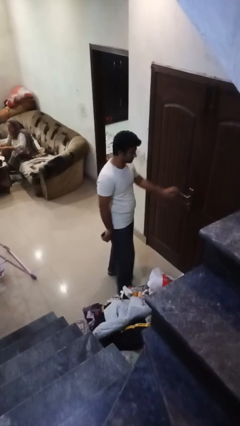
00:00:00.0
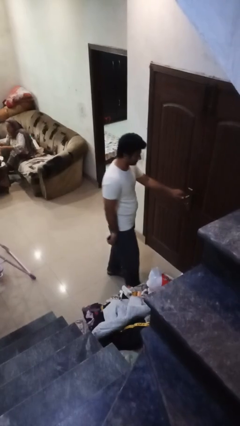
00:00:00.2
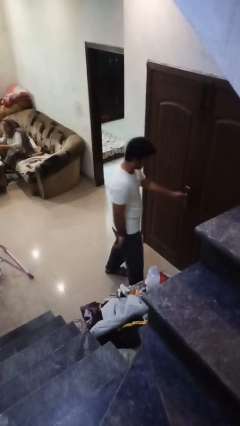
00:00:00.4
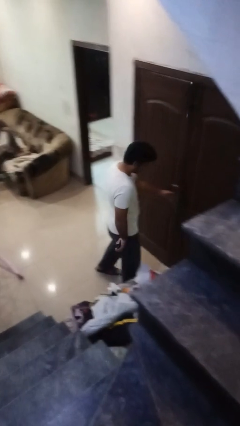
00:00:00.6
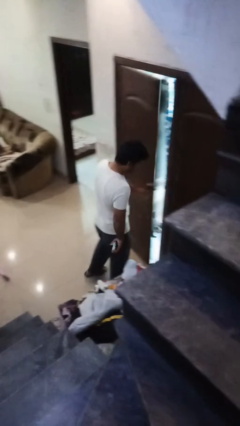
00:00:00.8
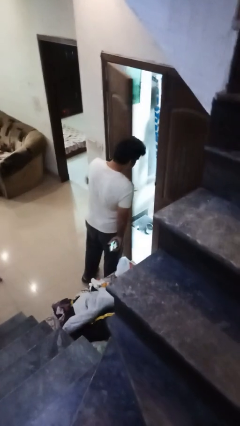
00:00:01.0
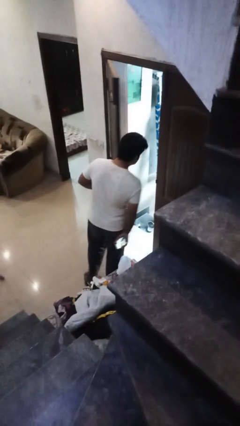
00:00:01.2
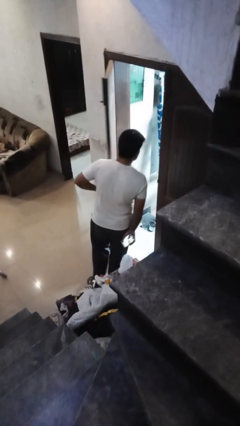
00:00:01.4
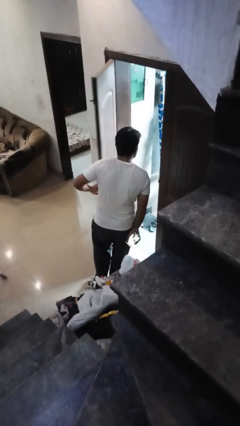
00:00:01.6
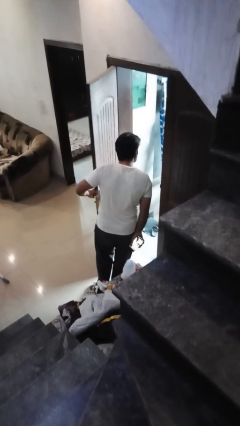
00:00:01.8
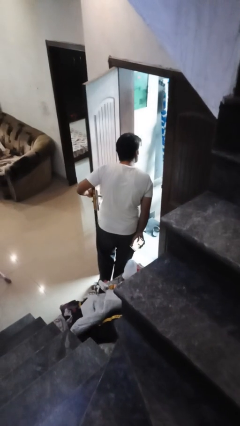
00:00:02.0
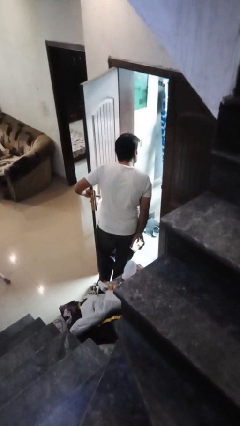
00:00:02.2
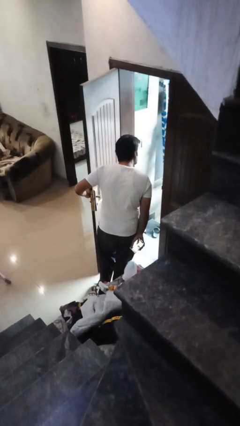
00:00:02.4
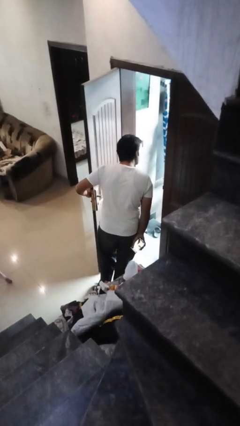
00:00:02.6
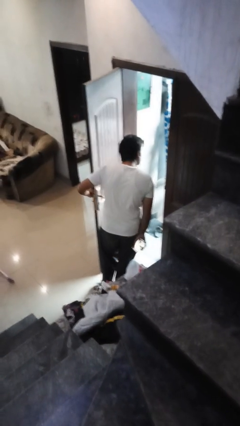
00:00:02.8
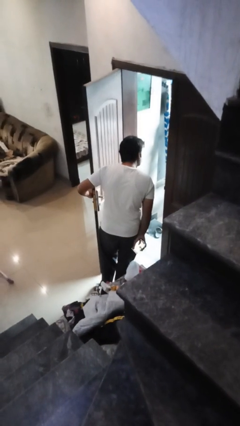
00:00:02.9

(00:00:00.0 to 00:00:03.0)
person opens facility door

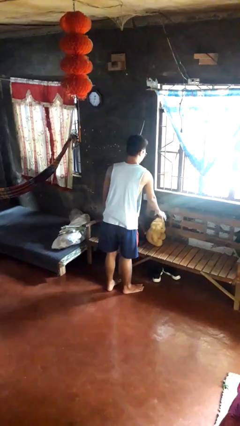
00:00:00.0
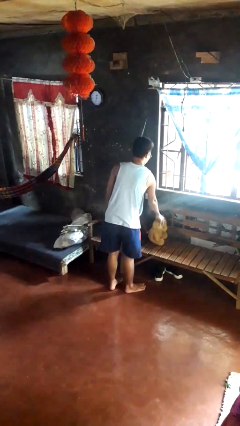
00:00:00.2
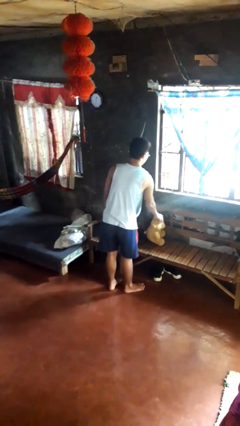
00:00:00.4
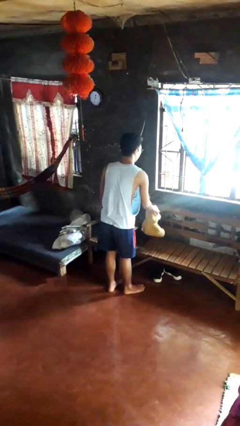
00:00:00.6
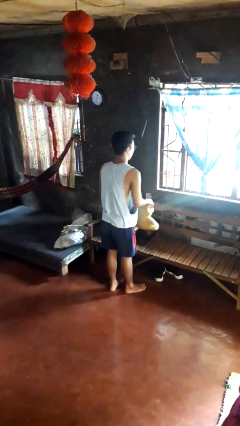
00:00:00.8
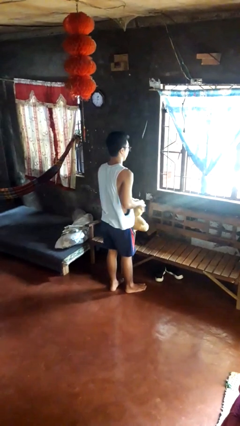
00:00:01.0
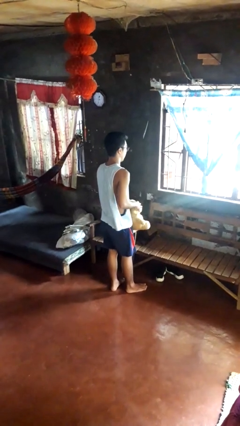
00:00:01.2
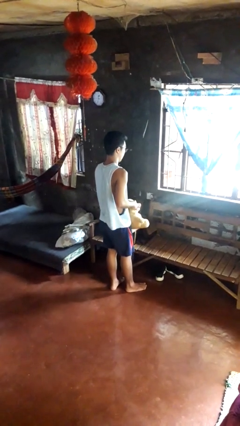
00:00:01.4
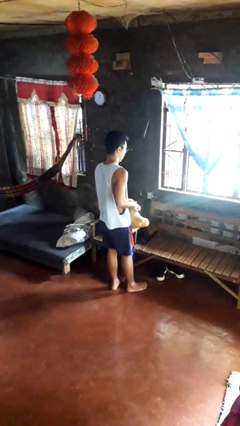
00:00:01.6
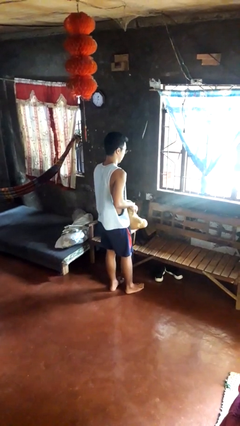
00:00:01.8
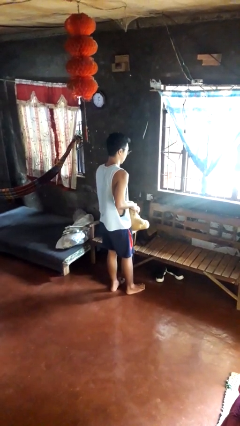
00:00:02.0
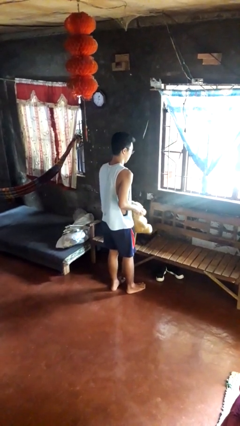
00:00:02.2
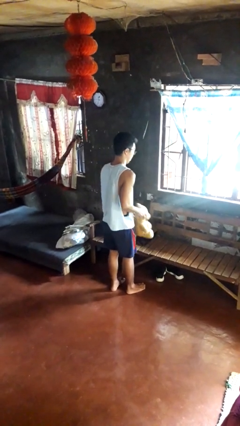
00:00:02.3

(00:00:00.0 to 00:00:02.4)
person picks up object from couch

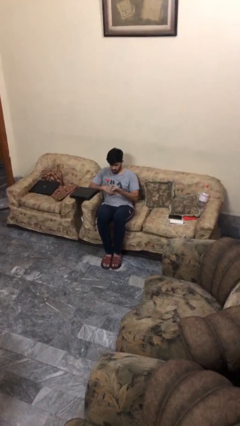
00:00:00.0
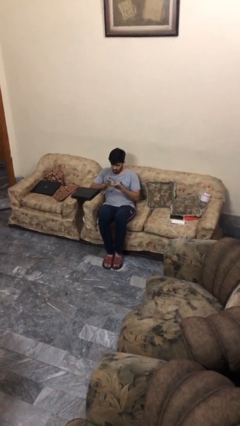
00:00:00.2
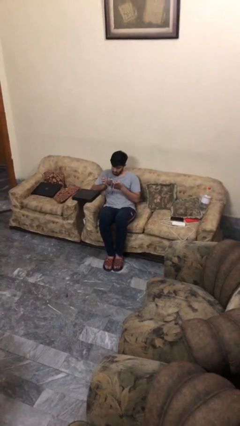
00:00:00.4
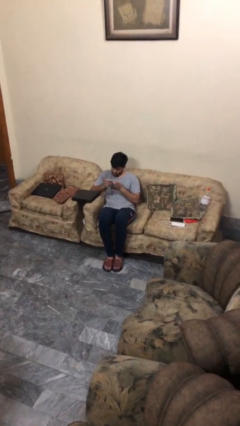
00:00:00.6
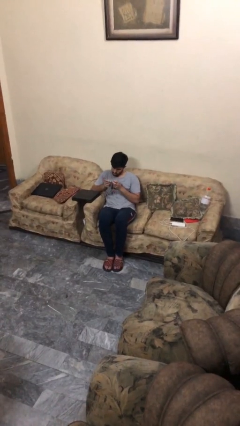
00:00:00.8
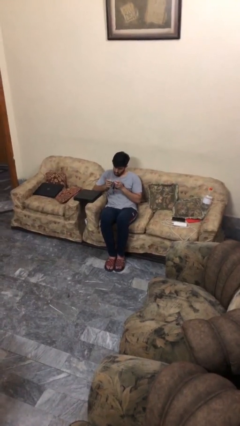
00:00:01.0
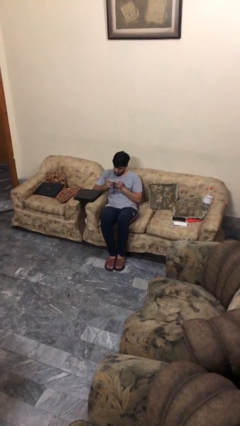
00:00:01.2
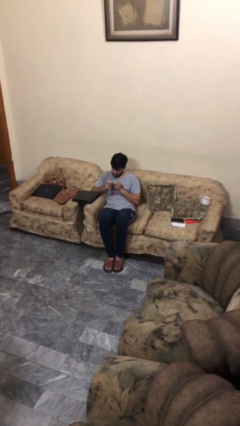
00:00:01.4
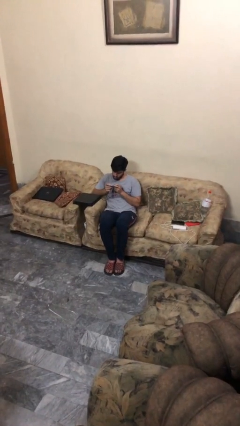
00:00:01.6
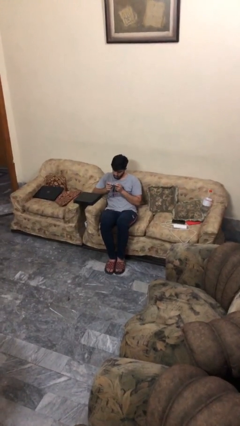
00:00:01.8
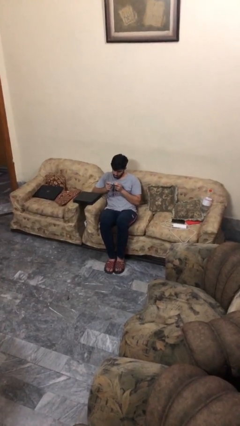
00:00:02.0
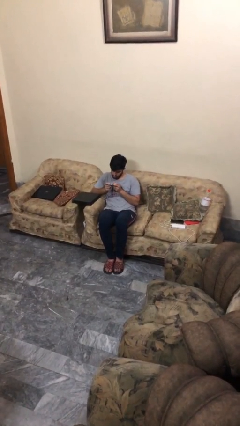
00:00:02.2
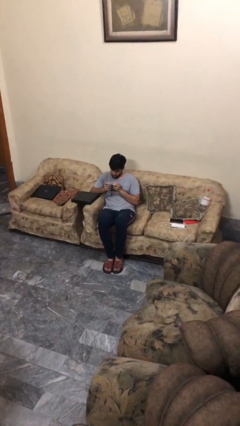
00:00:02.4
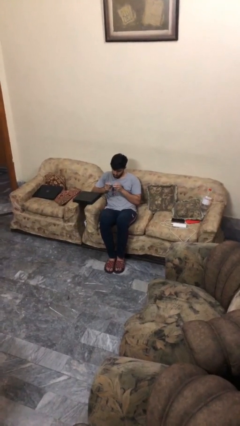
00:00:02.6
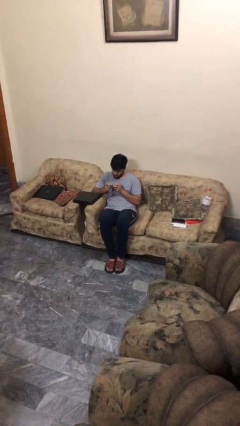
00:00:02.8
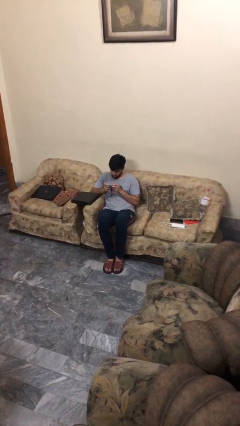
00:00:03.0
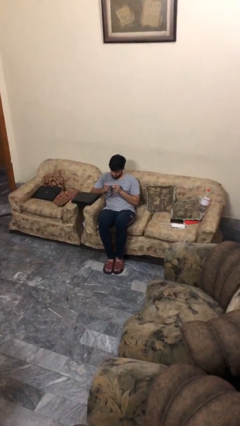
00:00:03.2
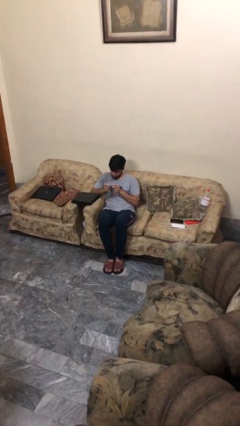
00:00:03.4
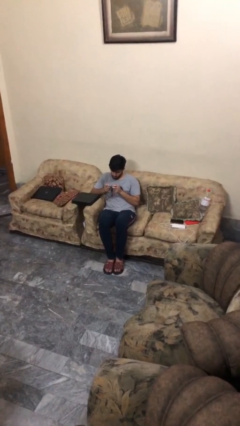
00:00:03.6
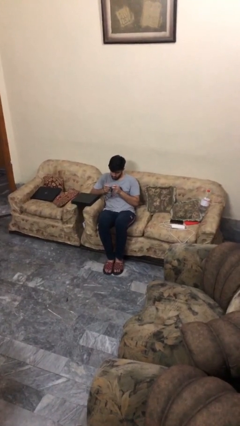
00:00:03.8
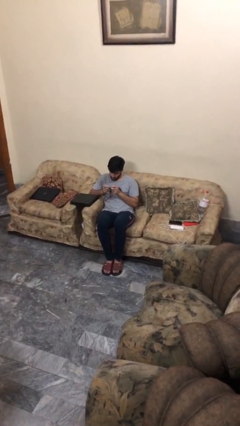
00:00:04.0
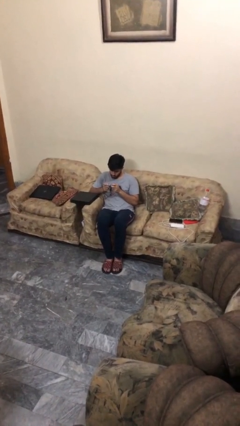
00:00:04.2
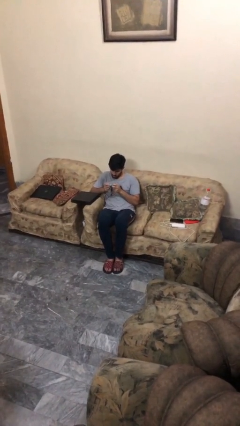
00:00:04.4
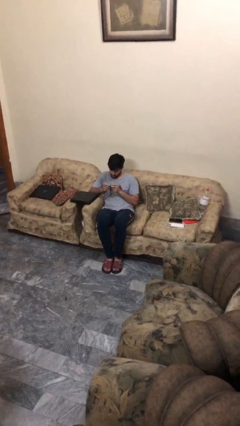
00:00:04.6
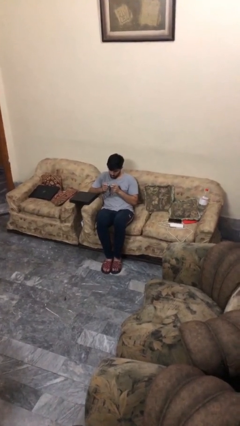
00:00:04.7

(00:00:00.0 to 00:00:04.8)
person interacts with handheld game

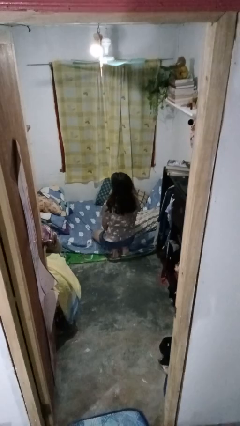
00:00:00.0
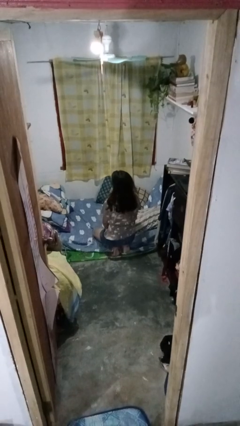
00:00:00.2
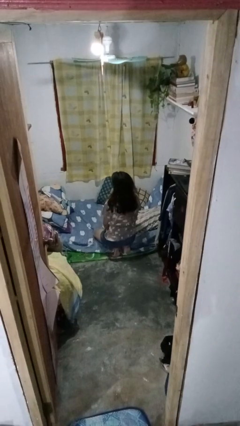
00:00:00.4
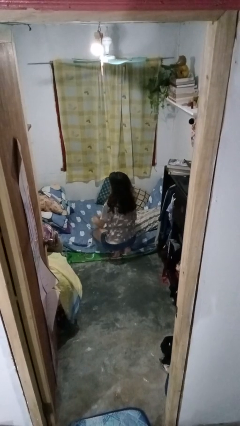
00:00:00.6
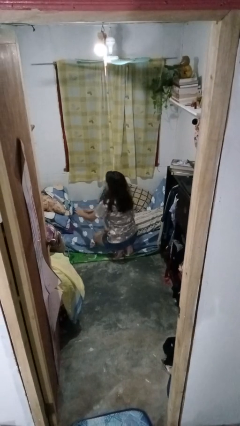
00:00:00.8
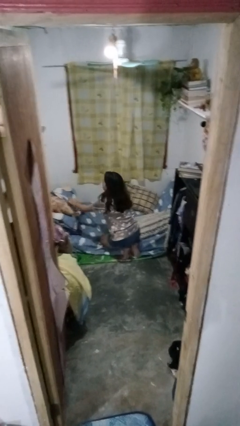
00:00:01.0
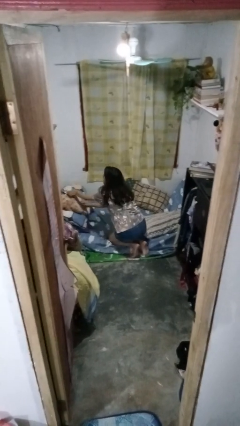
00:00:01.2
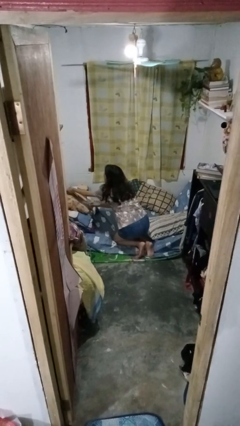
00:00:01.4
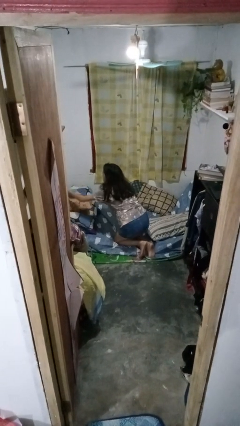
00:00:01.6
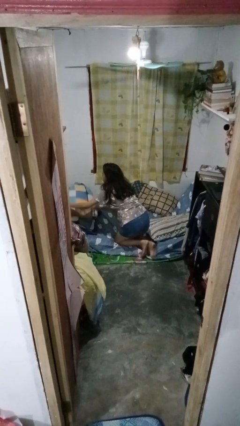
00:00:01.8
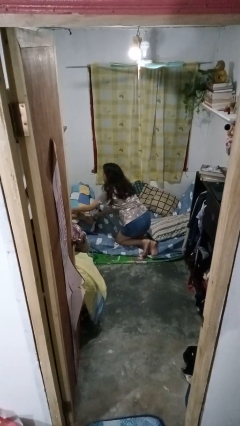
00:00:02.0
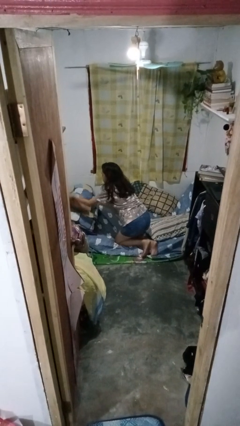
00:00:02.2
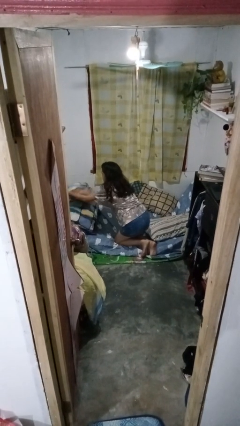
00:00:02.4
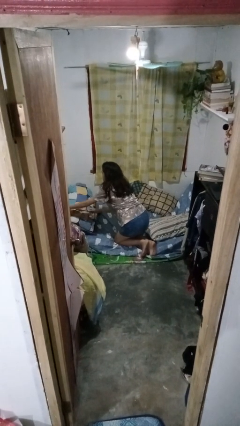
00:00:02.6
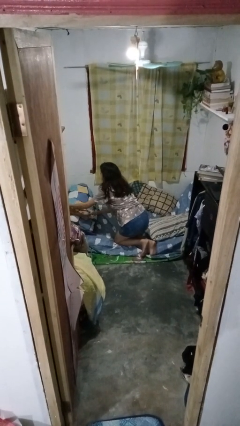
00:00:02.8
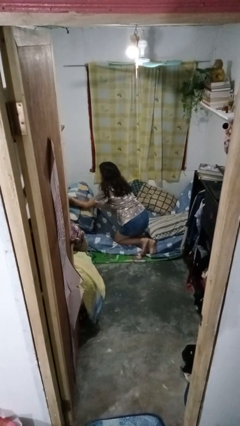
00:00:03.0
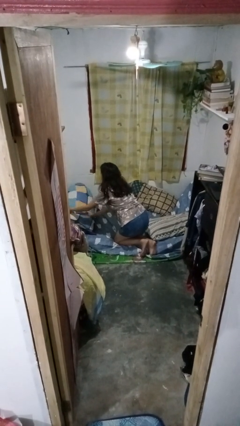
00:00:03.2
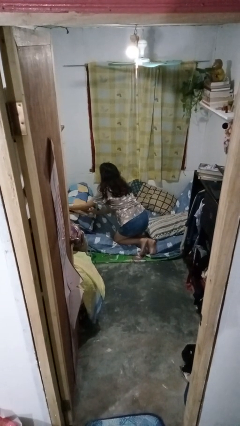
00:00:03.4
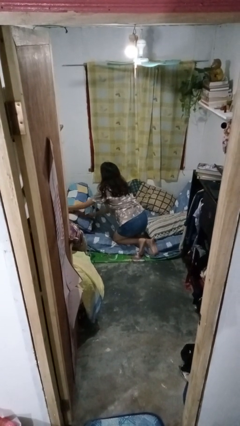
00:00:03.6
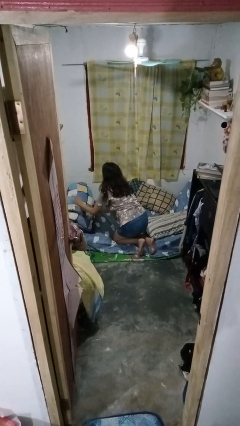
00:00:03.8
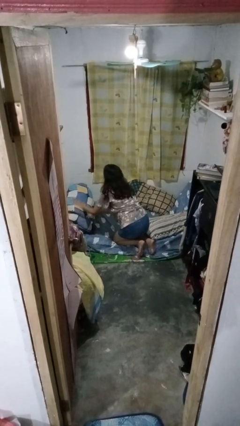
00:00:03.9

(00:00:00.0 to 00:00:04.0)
person makes bed

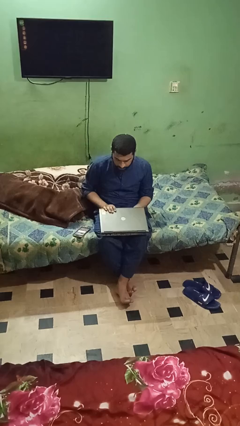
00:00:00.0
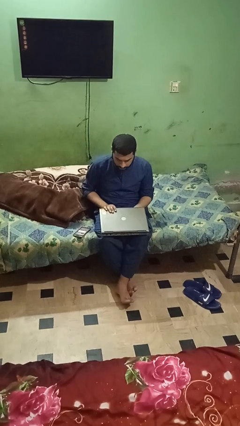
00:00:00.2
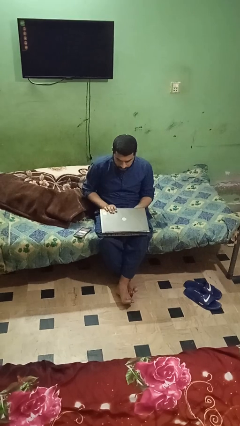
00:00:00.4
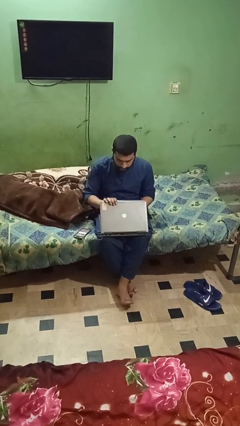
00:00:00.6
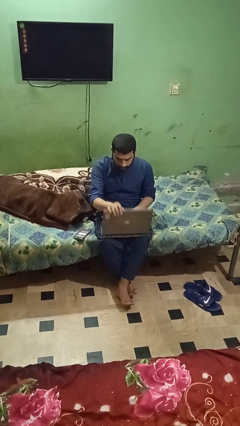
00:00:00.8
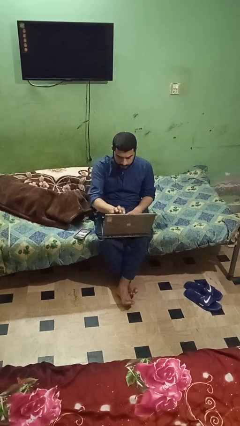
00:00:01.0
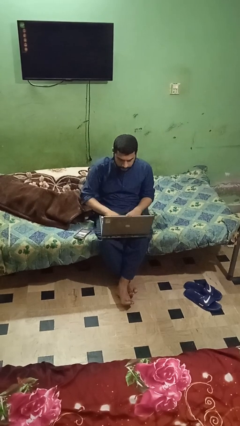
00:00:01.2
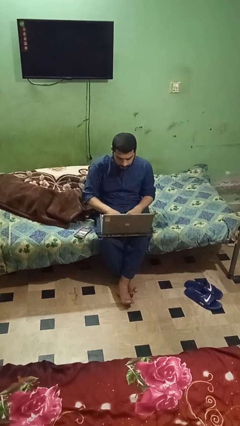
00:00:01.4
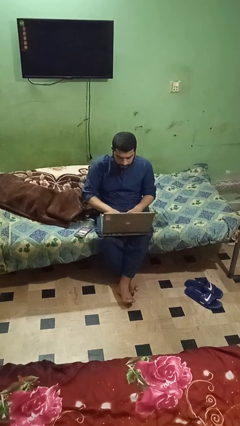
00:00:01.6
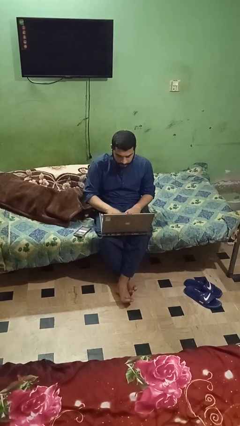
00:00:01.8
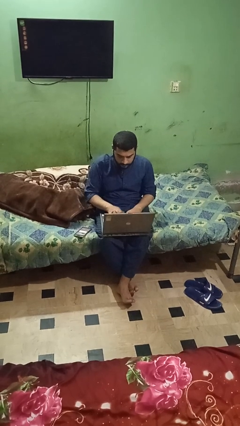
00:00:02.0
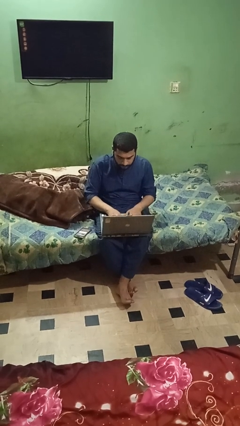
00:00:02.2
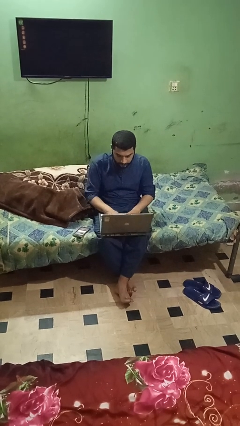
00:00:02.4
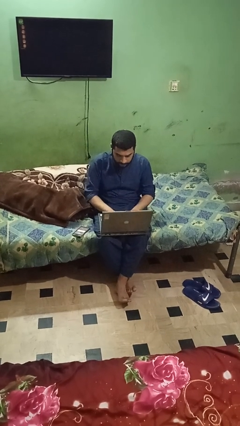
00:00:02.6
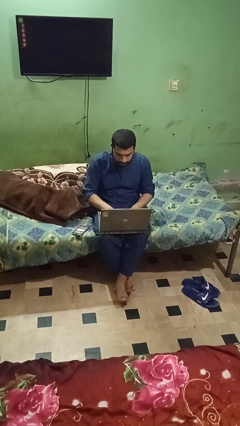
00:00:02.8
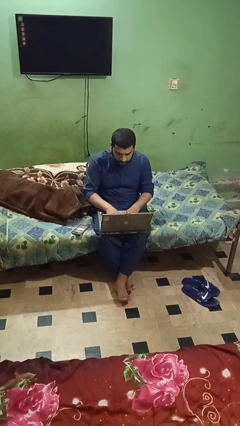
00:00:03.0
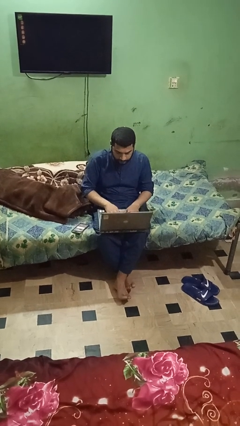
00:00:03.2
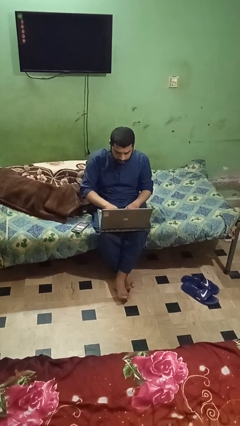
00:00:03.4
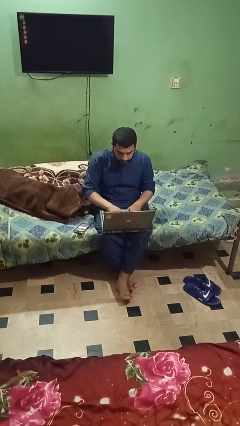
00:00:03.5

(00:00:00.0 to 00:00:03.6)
person opens laptop
